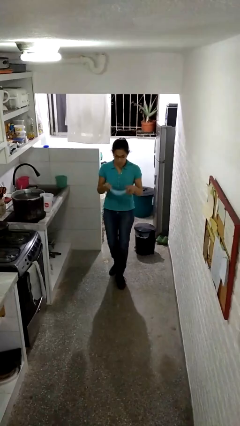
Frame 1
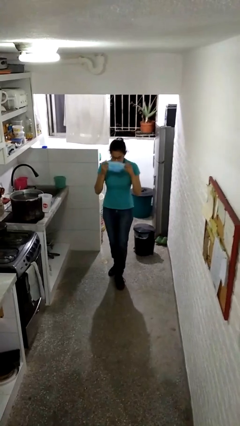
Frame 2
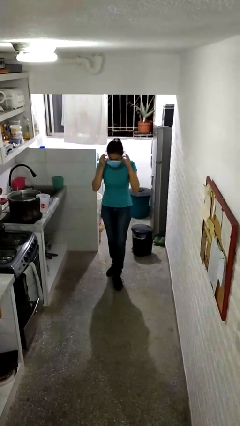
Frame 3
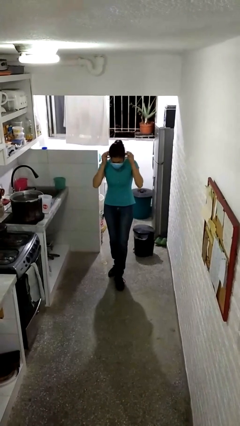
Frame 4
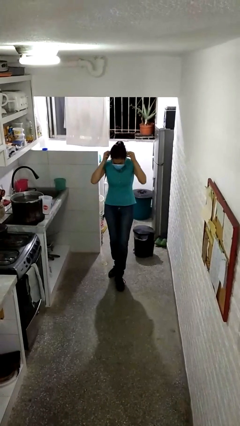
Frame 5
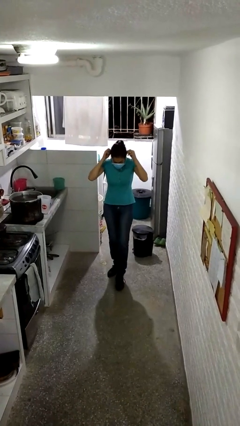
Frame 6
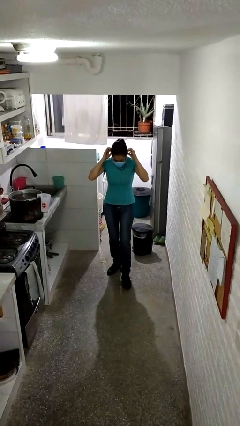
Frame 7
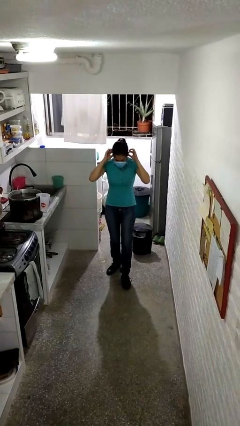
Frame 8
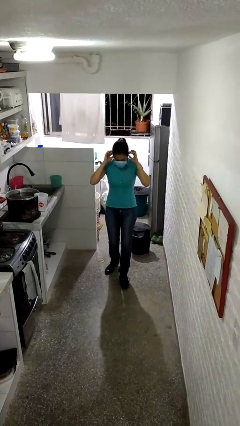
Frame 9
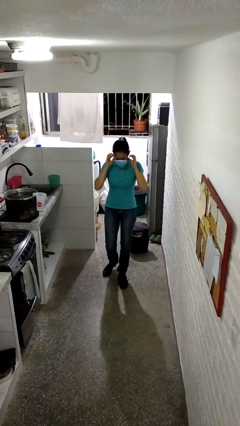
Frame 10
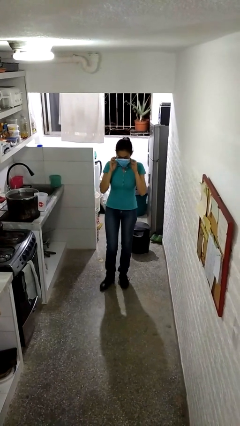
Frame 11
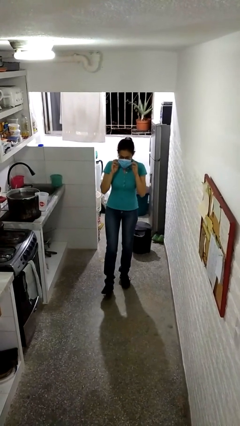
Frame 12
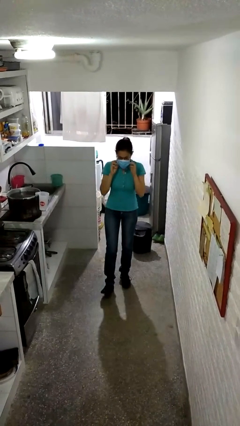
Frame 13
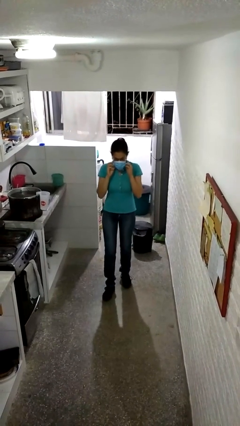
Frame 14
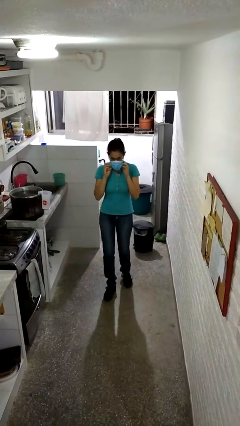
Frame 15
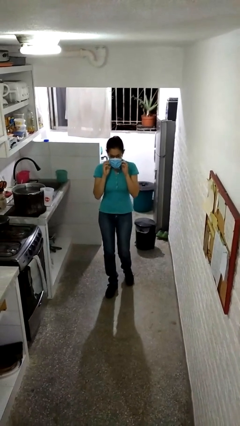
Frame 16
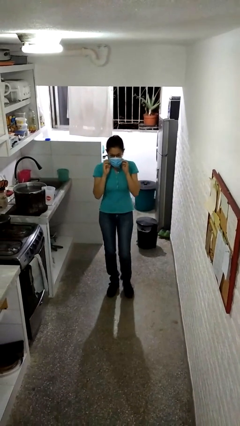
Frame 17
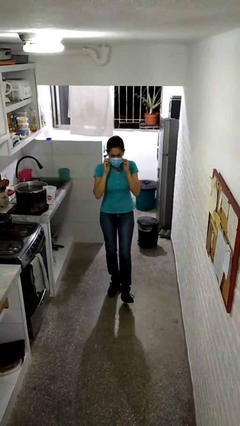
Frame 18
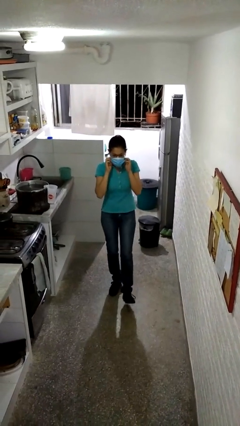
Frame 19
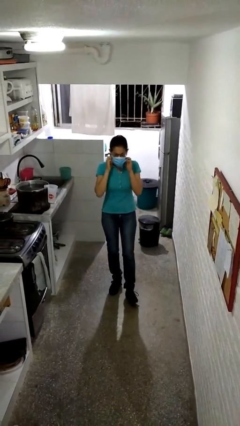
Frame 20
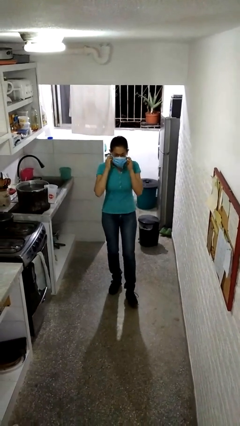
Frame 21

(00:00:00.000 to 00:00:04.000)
person puts on facemask

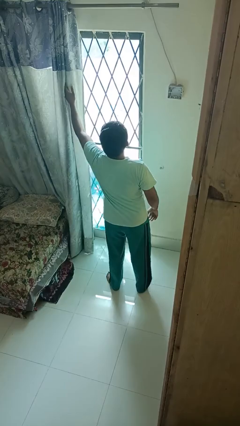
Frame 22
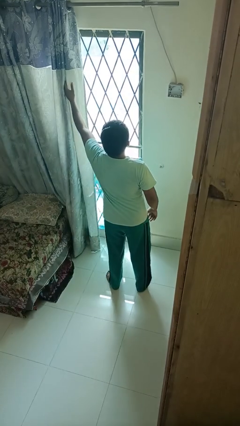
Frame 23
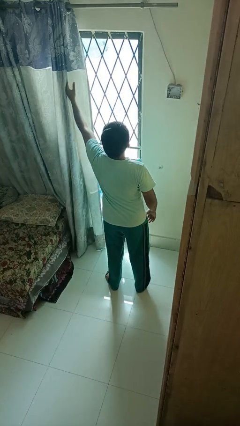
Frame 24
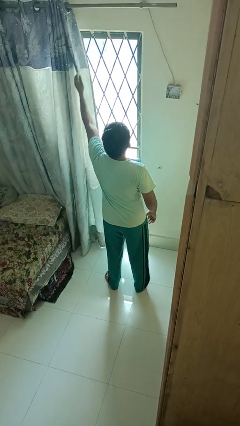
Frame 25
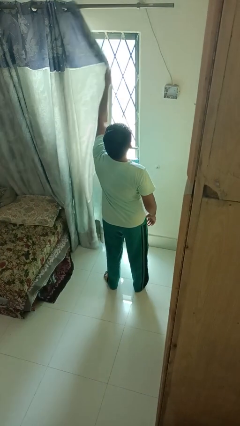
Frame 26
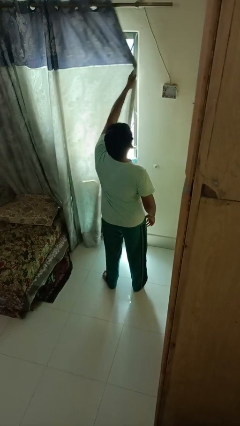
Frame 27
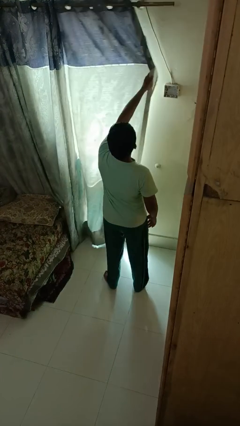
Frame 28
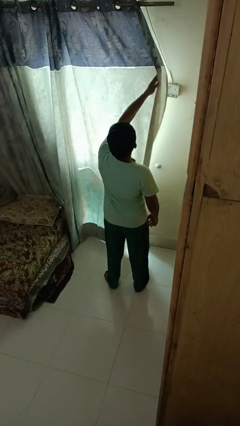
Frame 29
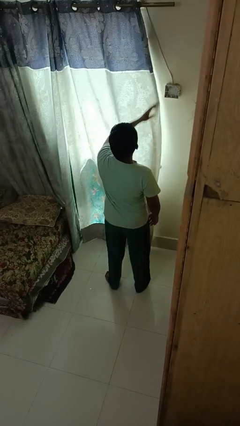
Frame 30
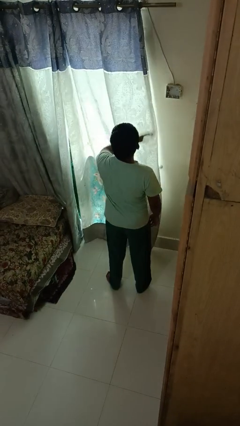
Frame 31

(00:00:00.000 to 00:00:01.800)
person closes curtains

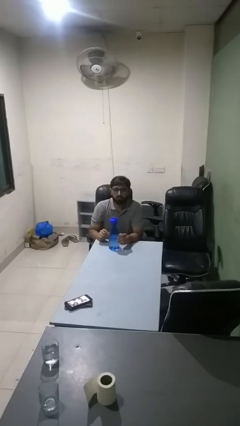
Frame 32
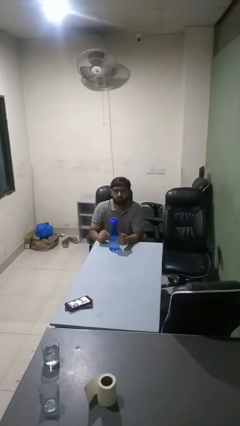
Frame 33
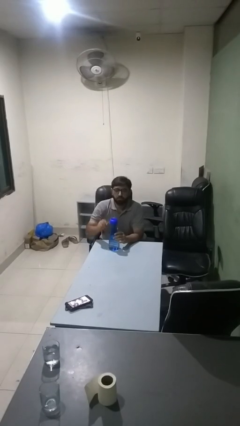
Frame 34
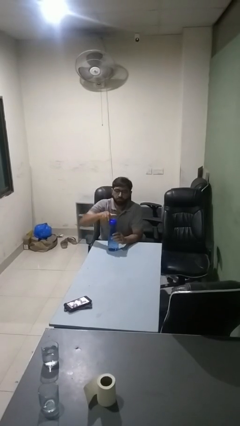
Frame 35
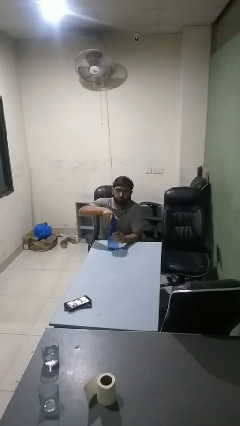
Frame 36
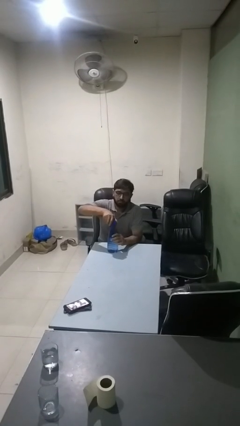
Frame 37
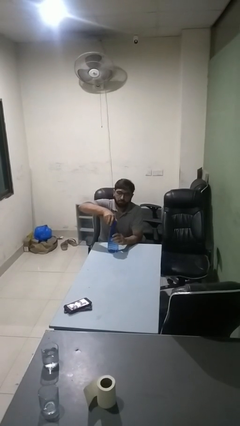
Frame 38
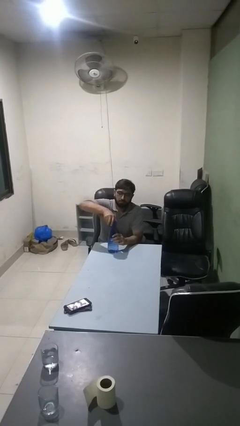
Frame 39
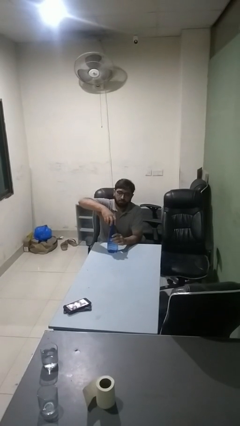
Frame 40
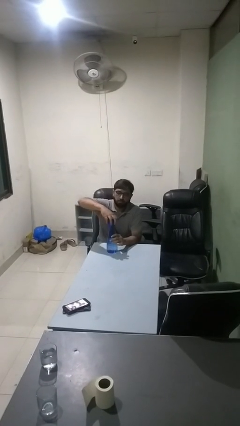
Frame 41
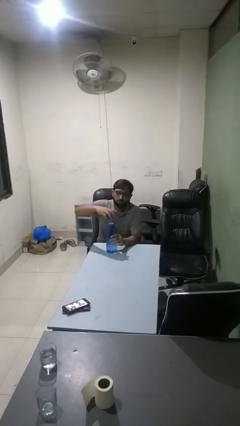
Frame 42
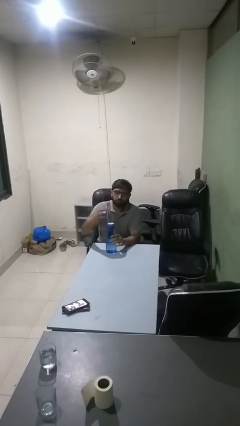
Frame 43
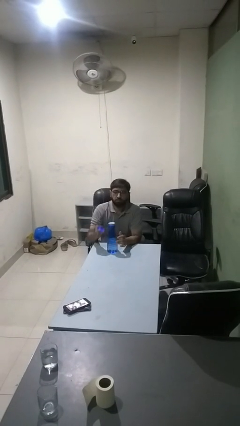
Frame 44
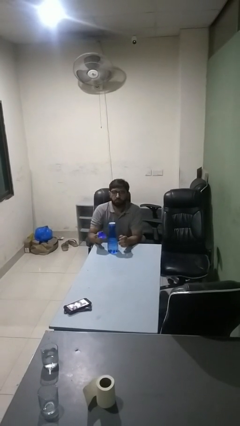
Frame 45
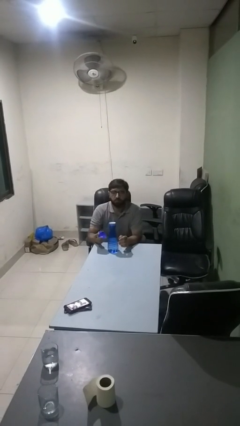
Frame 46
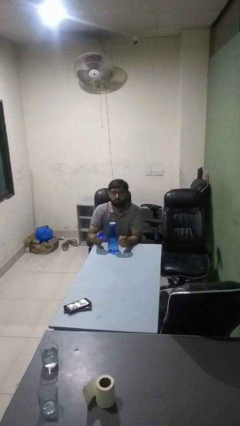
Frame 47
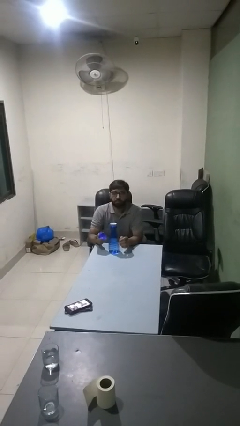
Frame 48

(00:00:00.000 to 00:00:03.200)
person unscrews lid from bottle

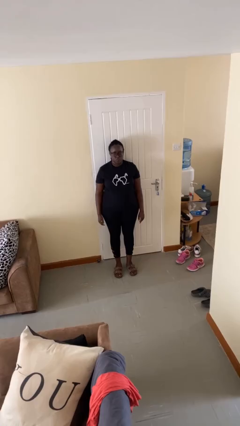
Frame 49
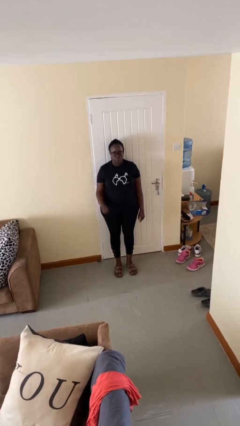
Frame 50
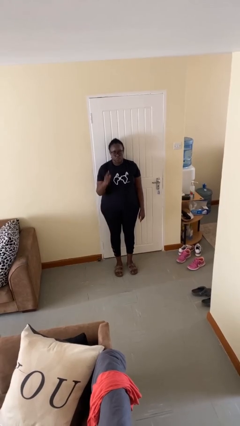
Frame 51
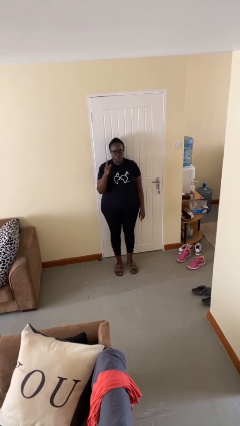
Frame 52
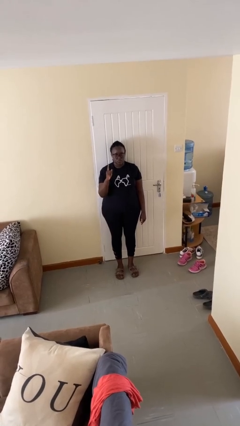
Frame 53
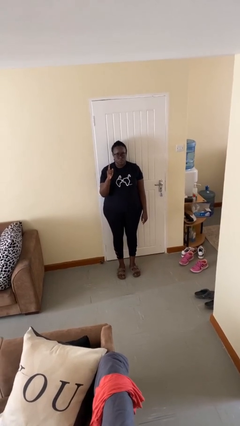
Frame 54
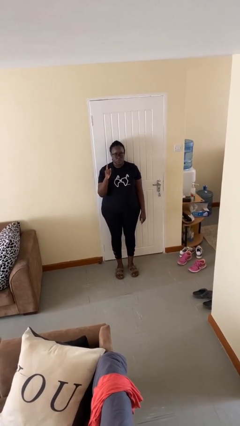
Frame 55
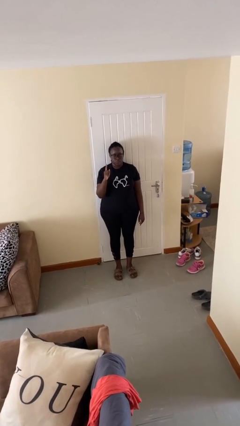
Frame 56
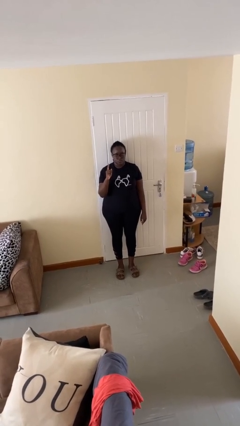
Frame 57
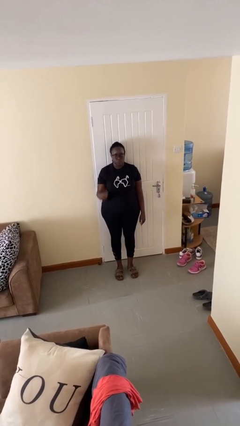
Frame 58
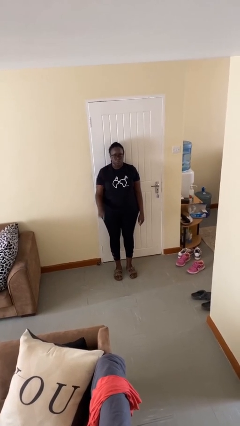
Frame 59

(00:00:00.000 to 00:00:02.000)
person gestures number one

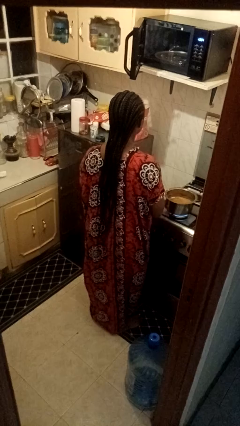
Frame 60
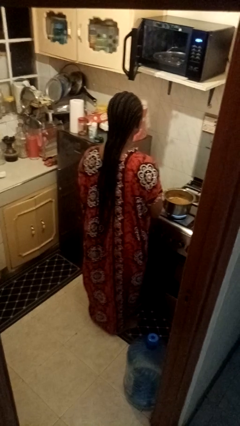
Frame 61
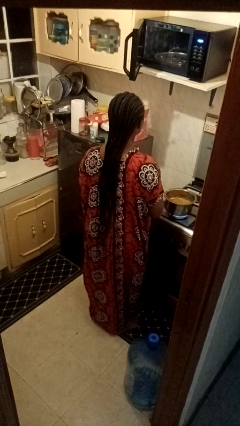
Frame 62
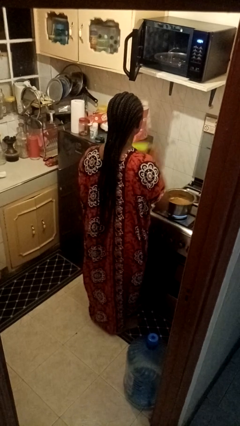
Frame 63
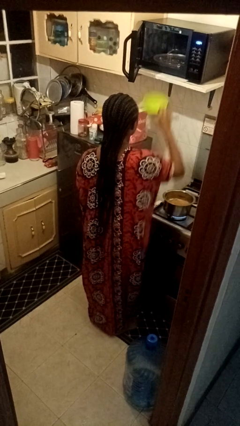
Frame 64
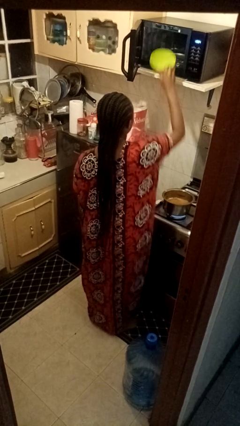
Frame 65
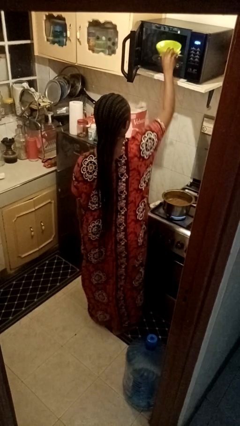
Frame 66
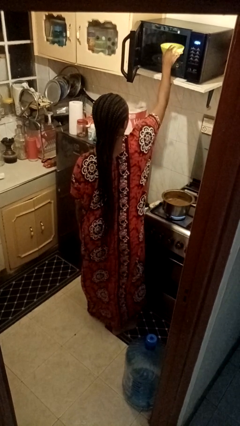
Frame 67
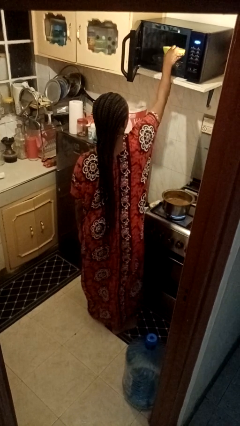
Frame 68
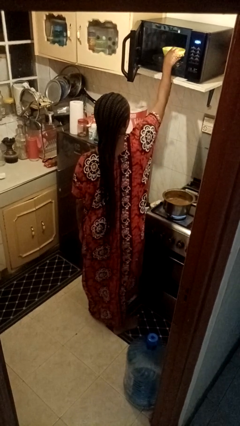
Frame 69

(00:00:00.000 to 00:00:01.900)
person puts object into microwave

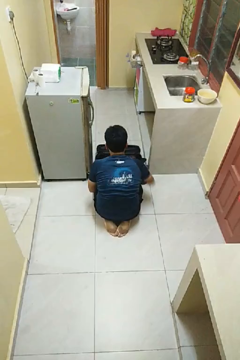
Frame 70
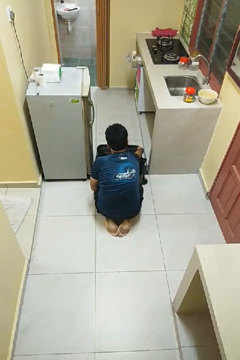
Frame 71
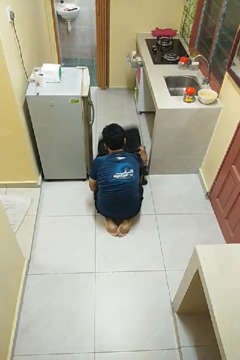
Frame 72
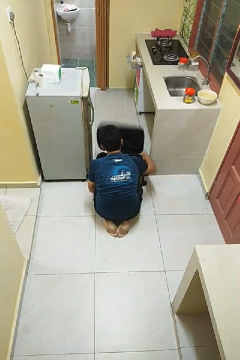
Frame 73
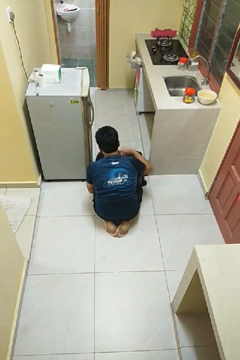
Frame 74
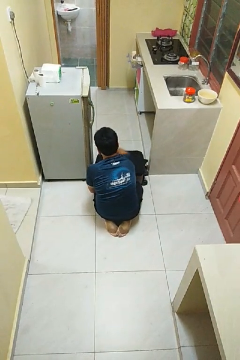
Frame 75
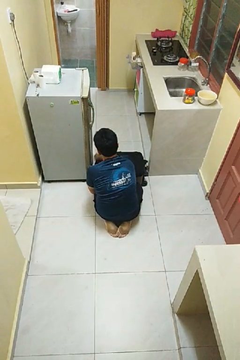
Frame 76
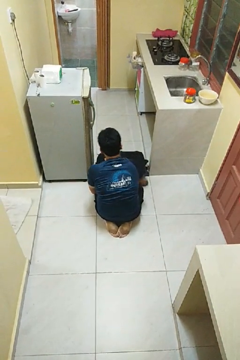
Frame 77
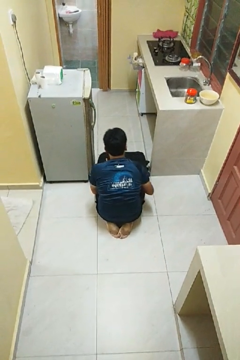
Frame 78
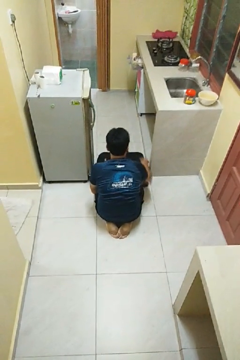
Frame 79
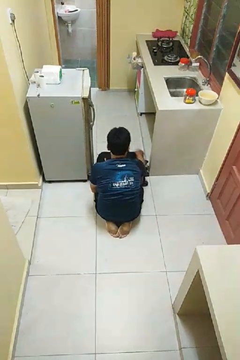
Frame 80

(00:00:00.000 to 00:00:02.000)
person closes suitcase

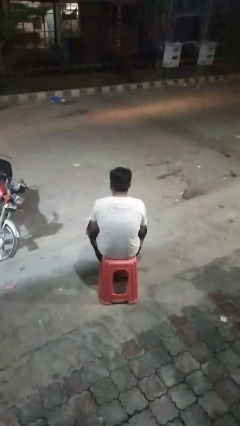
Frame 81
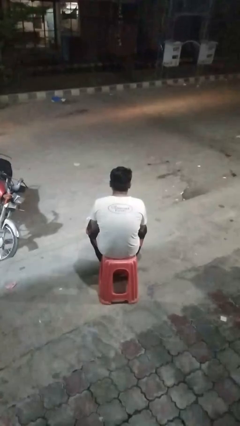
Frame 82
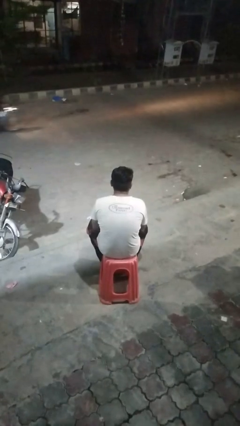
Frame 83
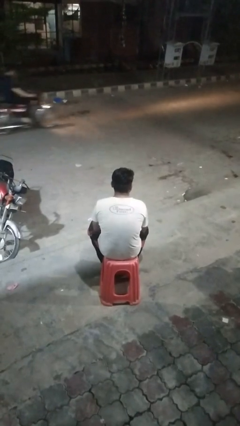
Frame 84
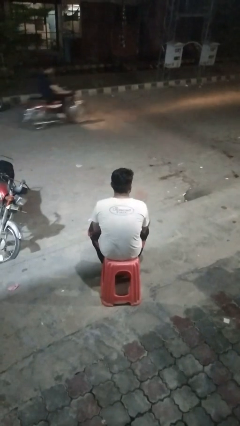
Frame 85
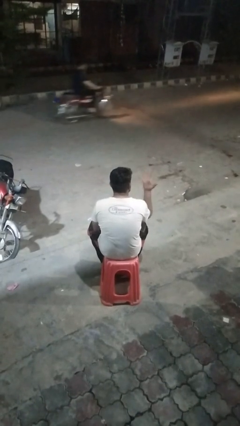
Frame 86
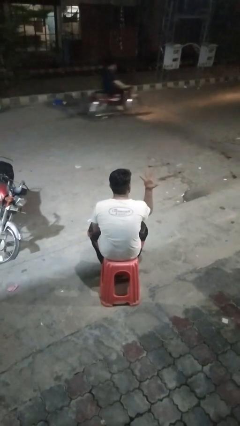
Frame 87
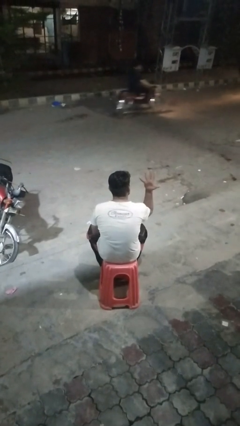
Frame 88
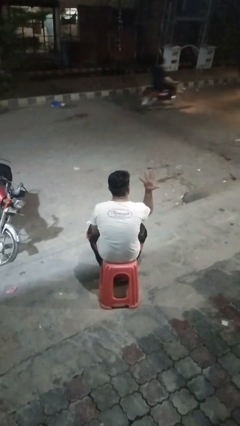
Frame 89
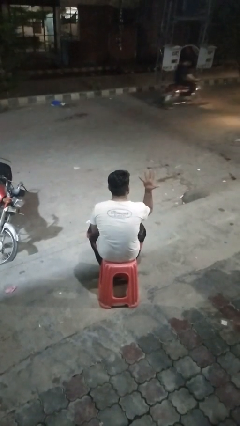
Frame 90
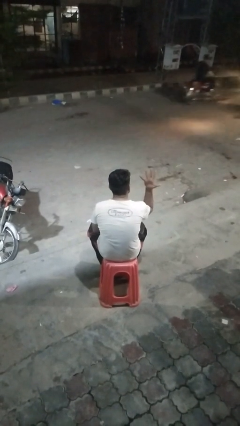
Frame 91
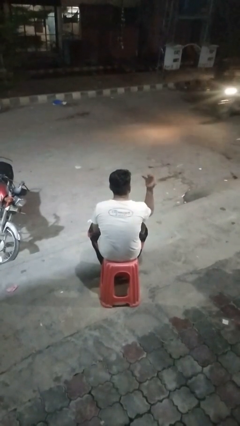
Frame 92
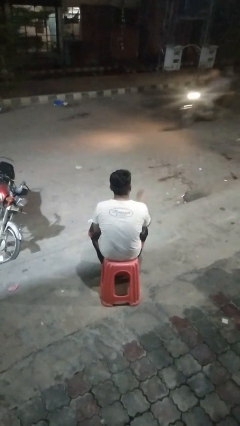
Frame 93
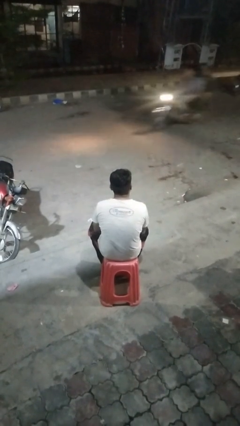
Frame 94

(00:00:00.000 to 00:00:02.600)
person gestures number five
